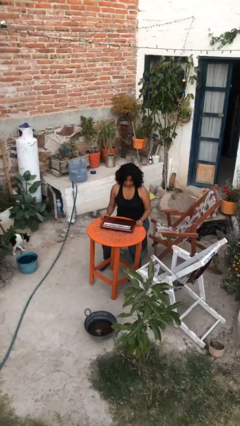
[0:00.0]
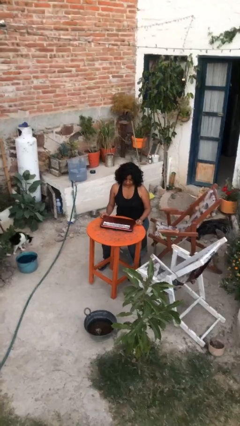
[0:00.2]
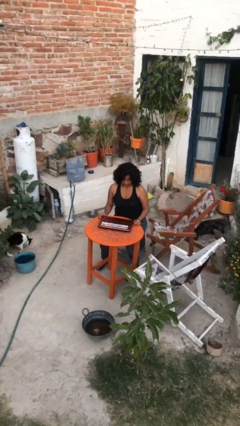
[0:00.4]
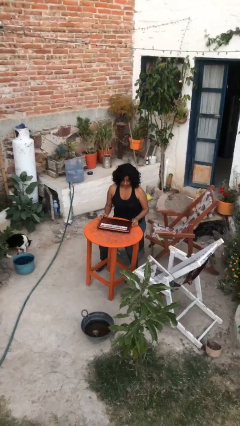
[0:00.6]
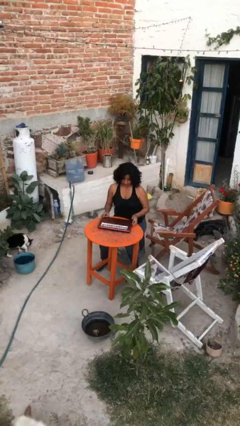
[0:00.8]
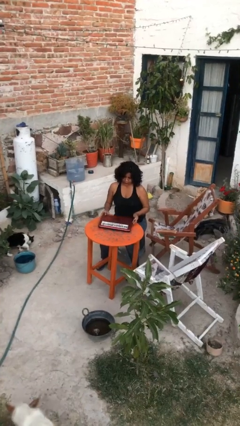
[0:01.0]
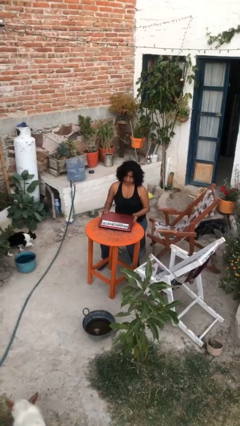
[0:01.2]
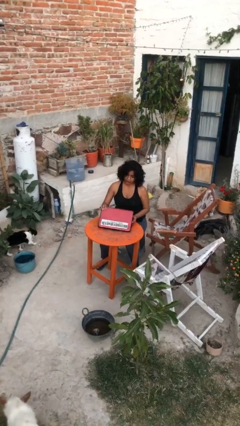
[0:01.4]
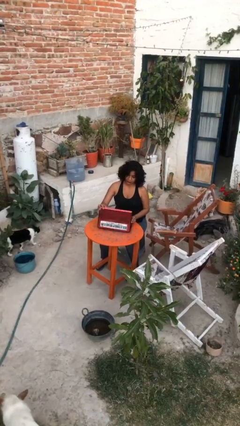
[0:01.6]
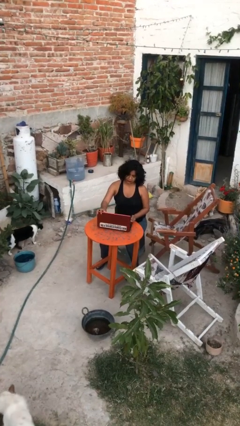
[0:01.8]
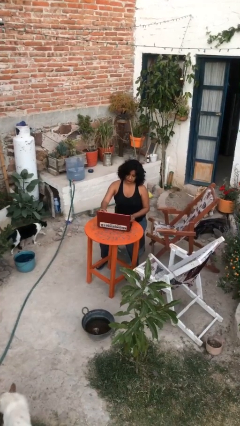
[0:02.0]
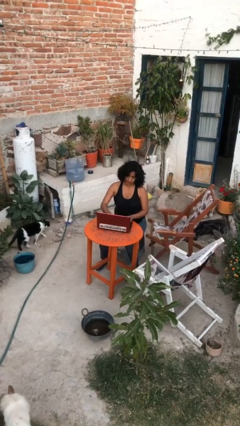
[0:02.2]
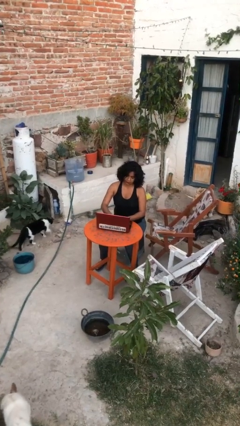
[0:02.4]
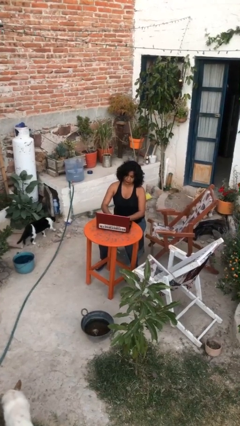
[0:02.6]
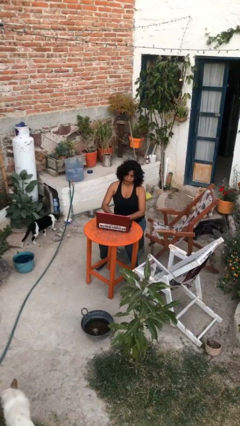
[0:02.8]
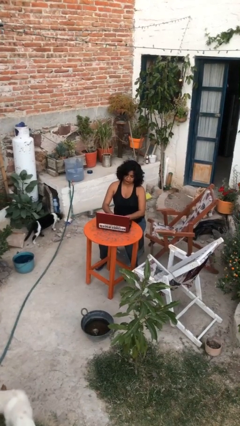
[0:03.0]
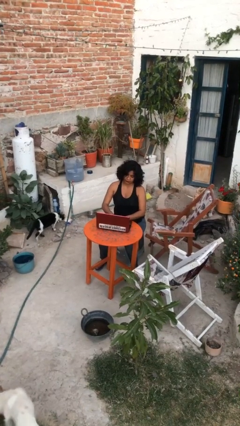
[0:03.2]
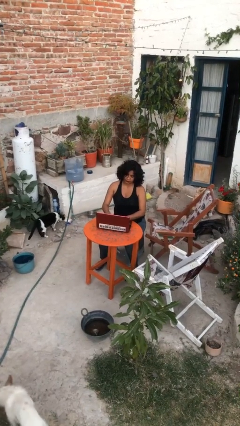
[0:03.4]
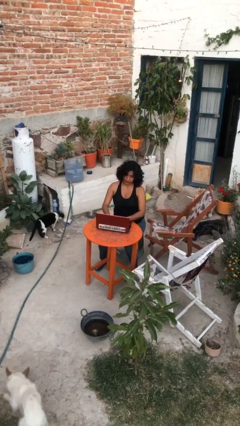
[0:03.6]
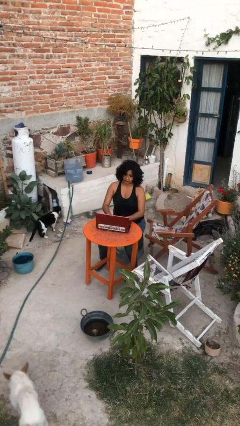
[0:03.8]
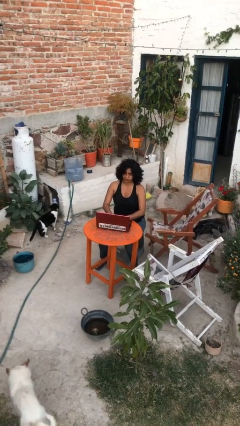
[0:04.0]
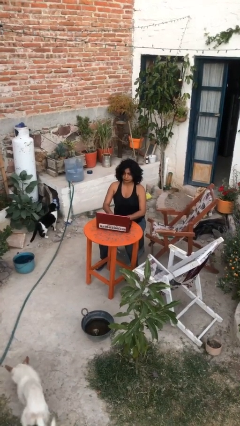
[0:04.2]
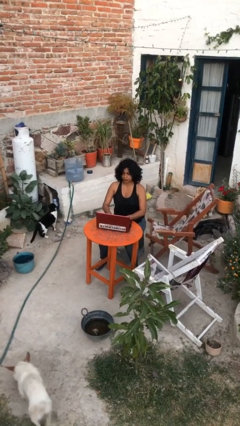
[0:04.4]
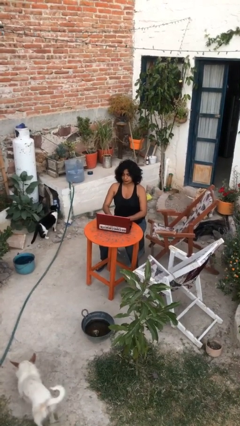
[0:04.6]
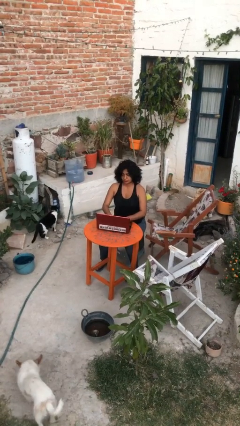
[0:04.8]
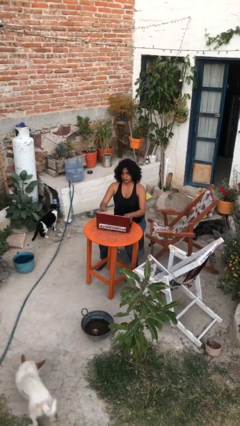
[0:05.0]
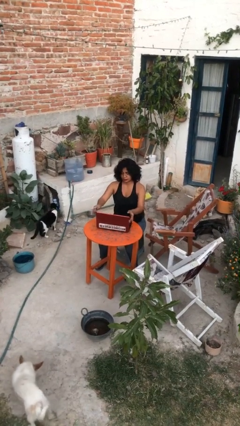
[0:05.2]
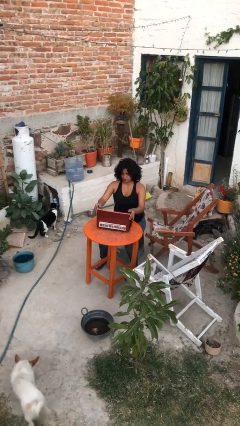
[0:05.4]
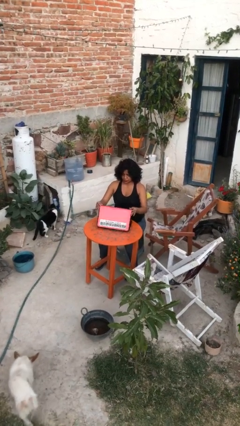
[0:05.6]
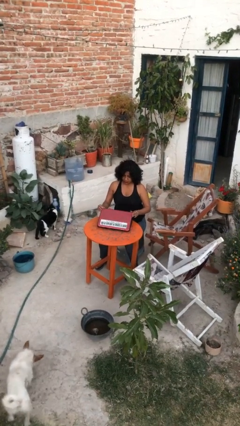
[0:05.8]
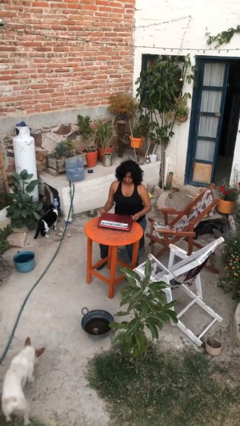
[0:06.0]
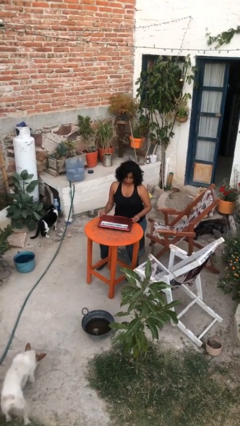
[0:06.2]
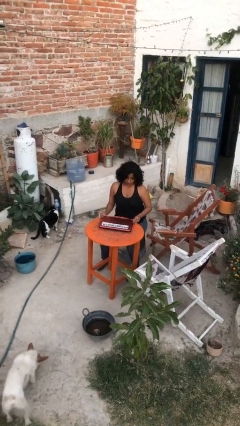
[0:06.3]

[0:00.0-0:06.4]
person interacts with laptop

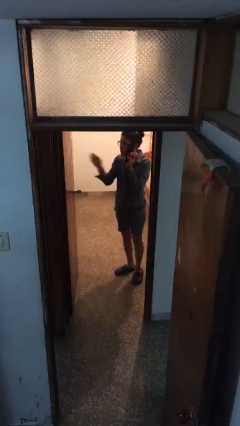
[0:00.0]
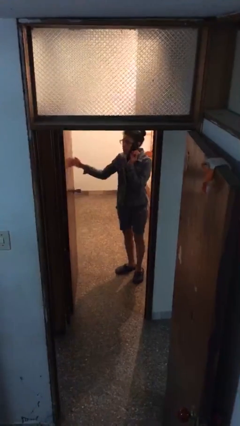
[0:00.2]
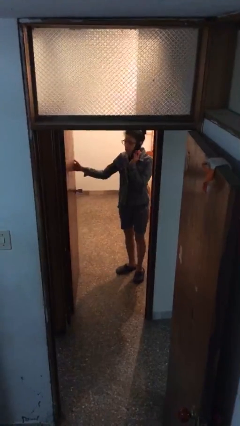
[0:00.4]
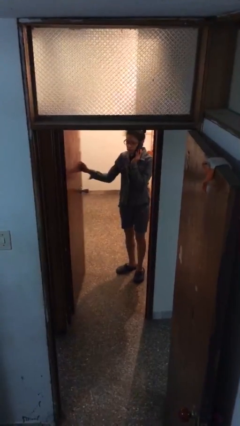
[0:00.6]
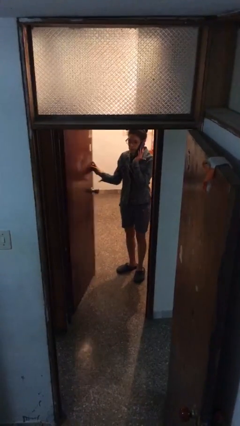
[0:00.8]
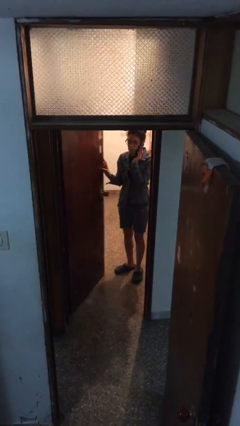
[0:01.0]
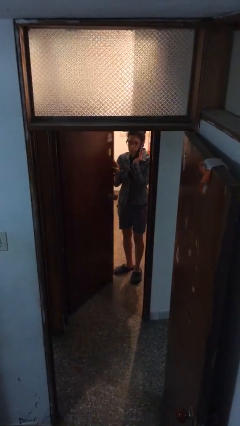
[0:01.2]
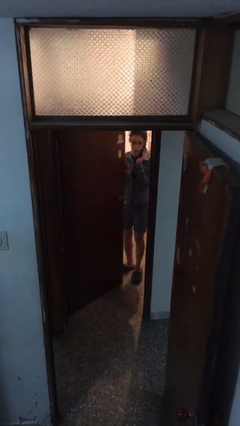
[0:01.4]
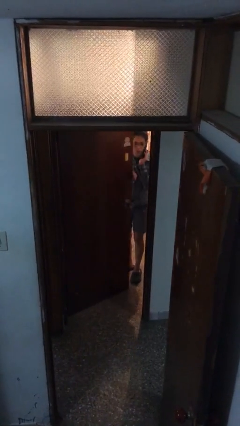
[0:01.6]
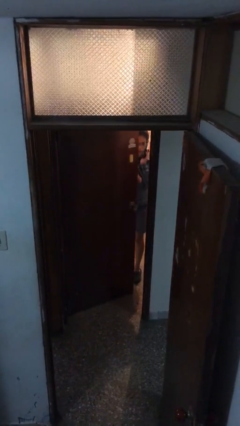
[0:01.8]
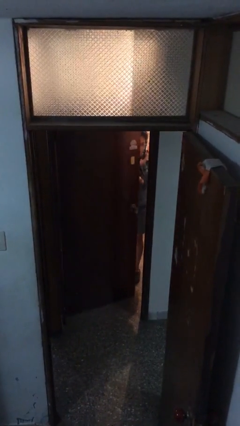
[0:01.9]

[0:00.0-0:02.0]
person closes facility door

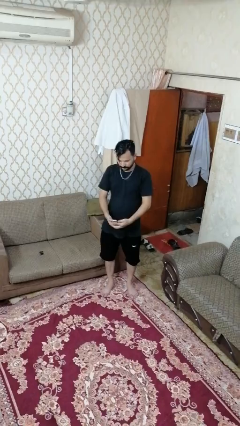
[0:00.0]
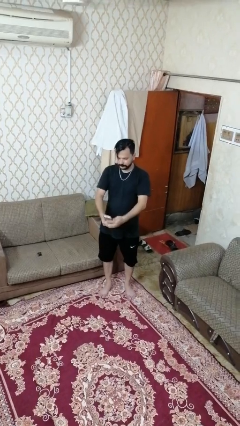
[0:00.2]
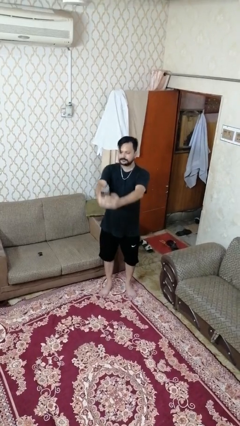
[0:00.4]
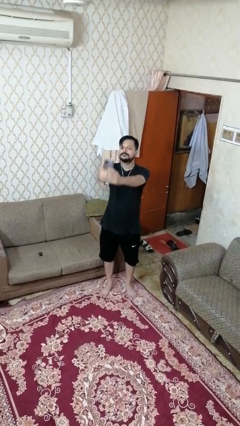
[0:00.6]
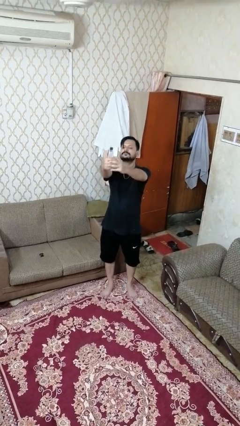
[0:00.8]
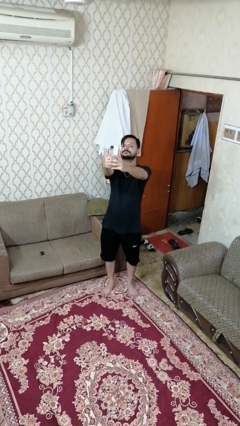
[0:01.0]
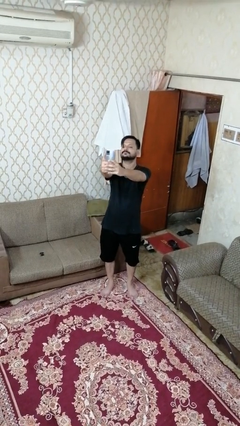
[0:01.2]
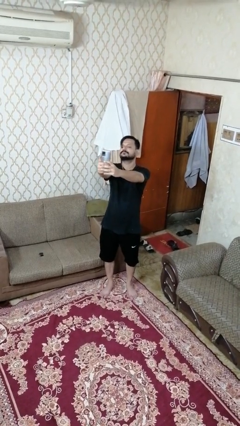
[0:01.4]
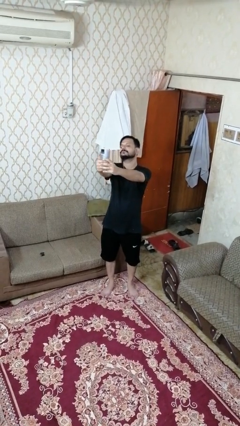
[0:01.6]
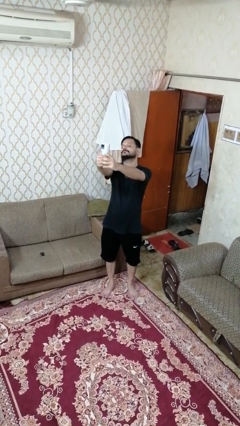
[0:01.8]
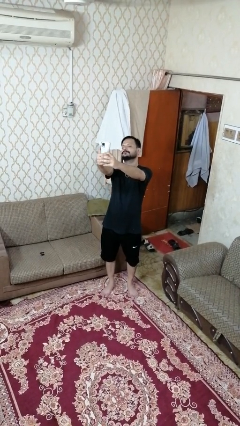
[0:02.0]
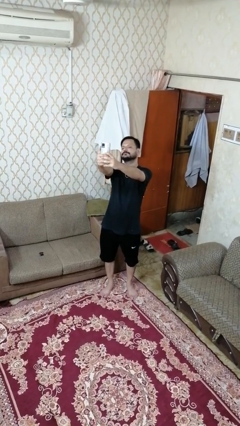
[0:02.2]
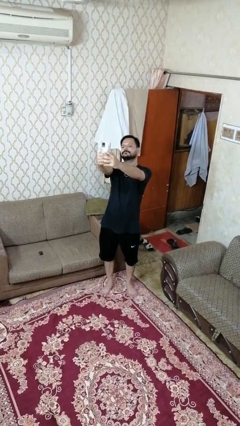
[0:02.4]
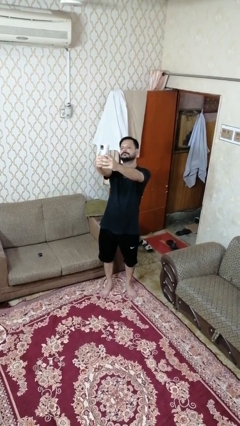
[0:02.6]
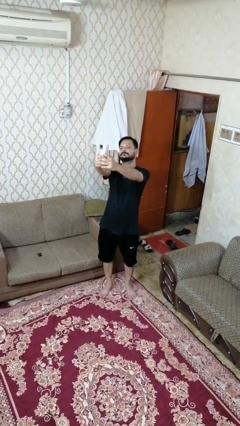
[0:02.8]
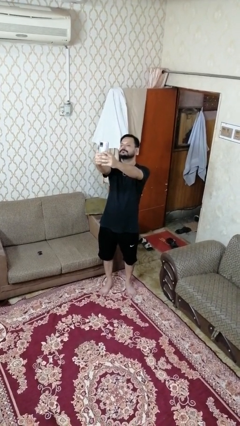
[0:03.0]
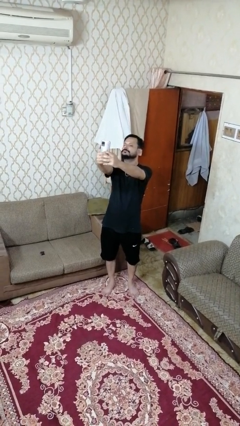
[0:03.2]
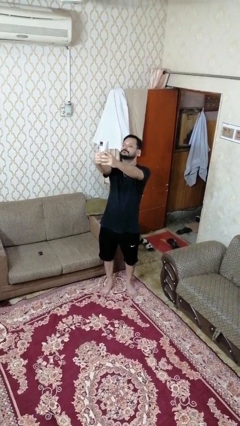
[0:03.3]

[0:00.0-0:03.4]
person takes selfie

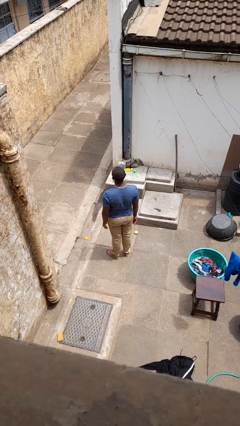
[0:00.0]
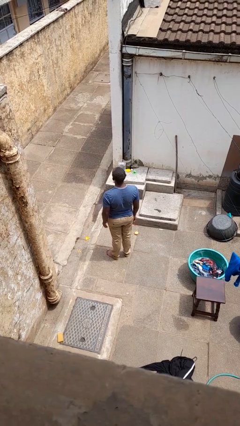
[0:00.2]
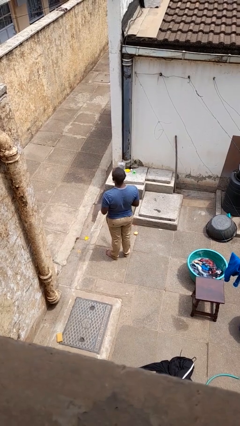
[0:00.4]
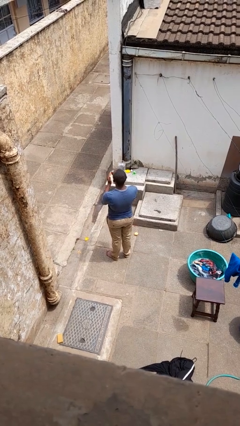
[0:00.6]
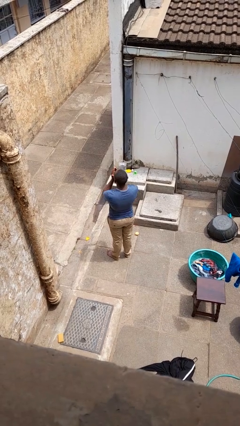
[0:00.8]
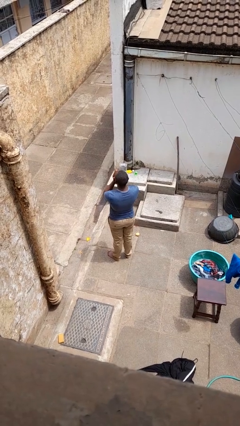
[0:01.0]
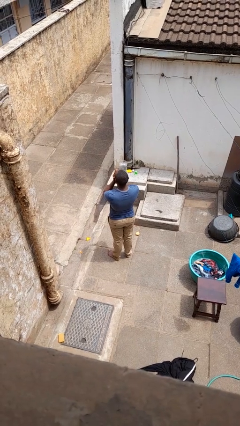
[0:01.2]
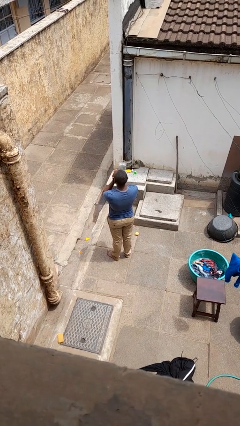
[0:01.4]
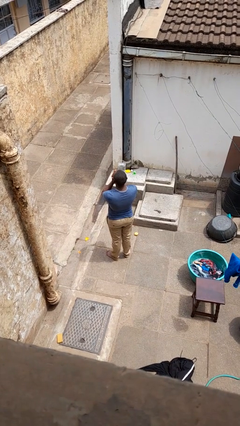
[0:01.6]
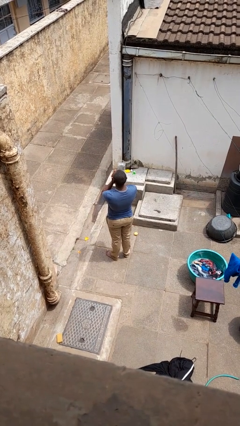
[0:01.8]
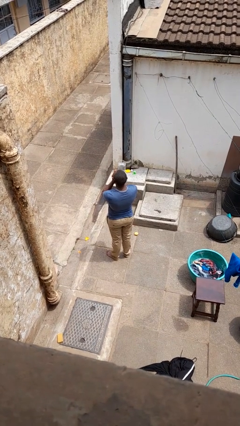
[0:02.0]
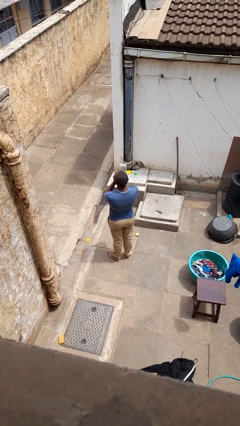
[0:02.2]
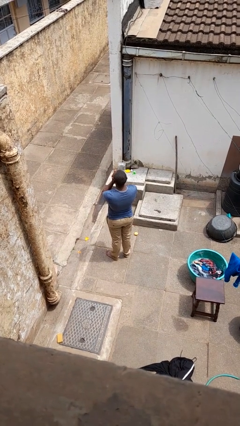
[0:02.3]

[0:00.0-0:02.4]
person blows into hands

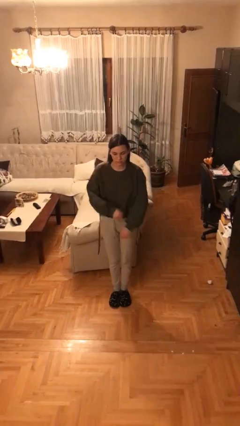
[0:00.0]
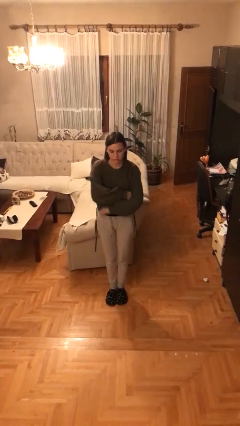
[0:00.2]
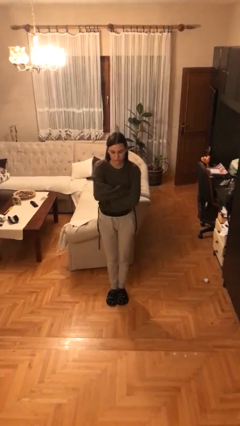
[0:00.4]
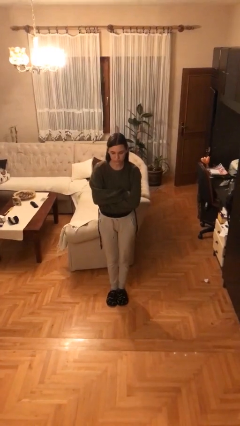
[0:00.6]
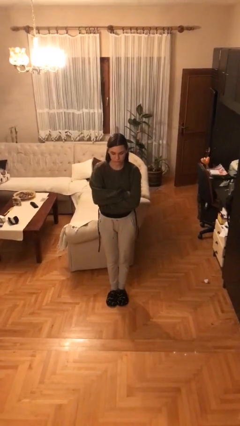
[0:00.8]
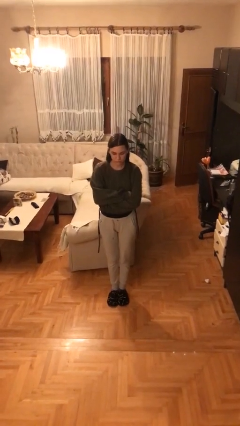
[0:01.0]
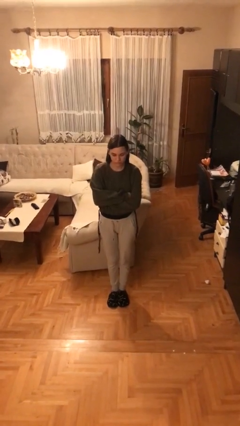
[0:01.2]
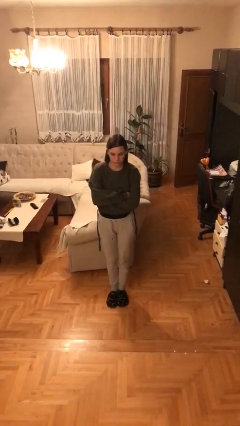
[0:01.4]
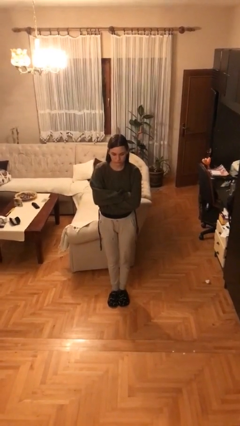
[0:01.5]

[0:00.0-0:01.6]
person crosses arms

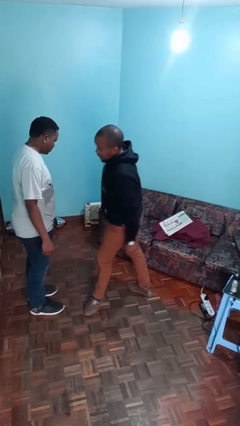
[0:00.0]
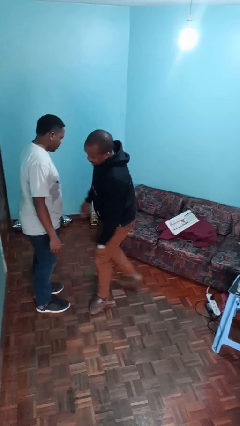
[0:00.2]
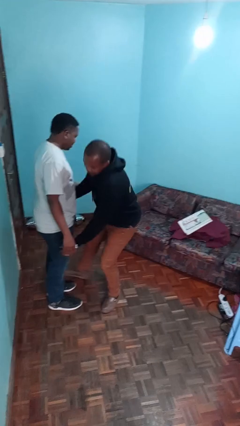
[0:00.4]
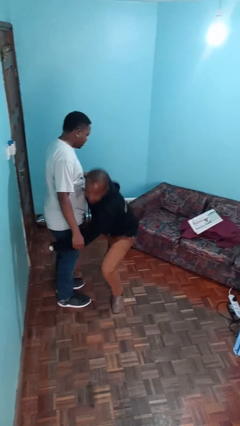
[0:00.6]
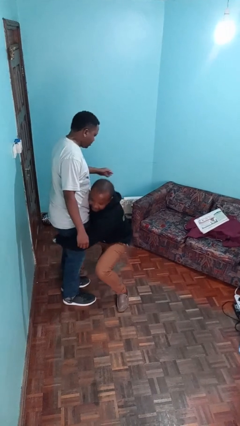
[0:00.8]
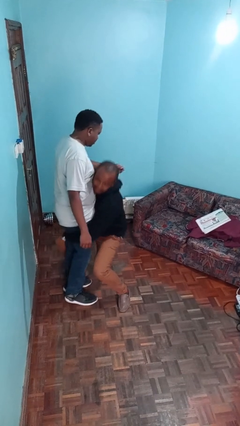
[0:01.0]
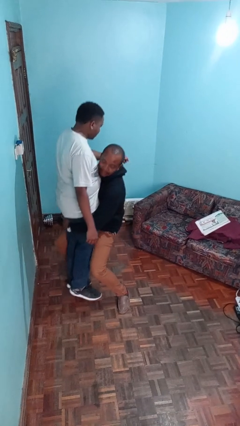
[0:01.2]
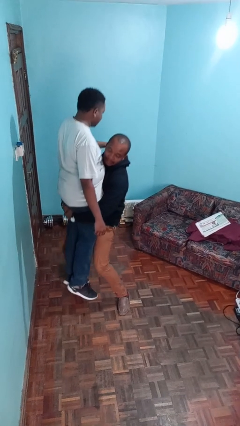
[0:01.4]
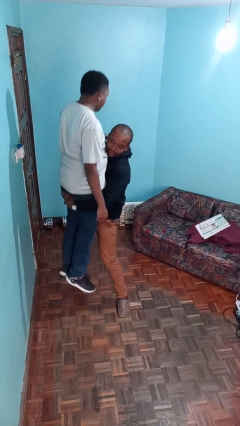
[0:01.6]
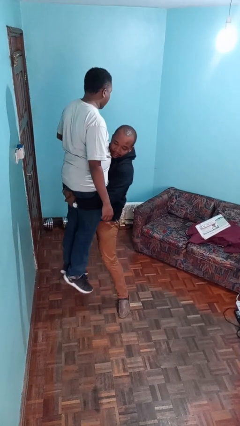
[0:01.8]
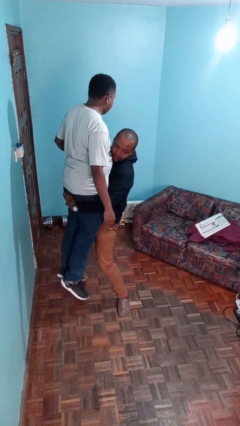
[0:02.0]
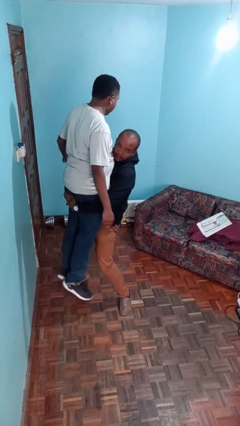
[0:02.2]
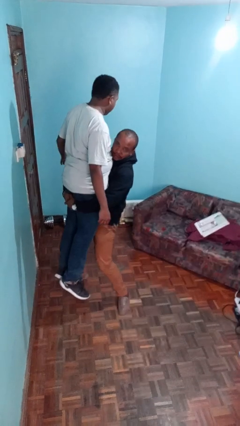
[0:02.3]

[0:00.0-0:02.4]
person picks up person
